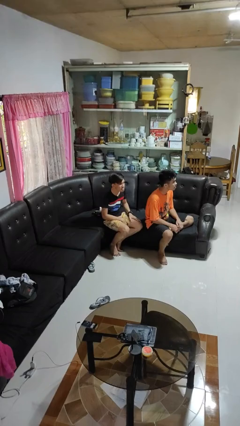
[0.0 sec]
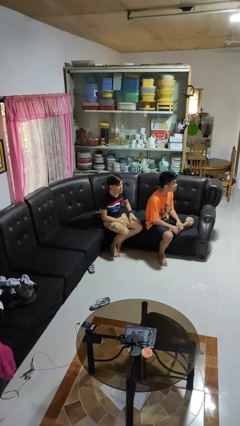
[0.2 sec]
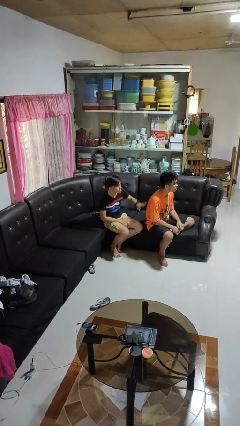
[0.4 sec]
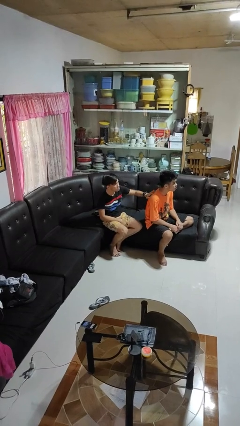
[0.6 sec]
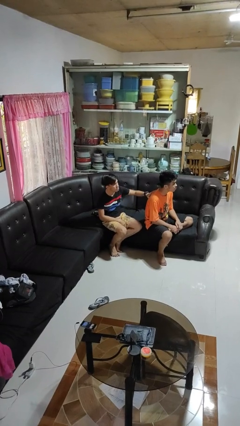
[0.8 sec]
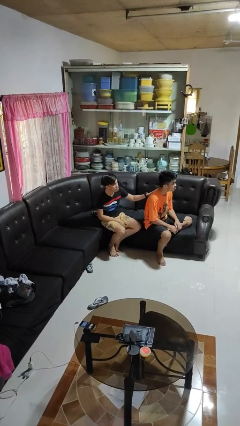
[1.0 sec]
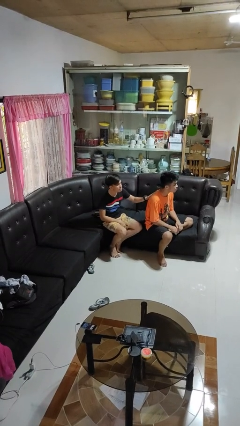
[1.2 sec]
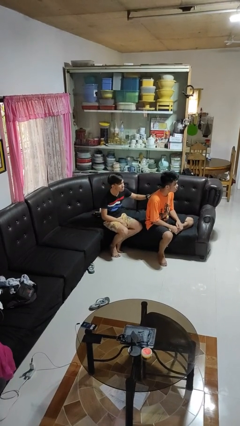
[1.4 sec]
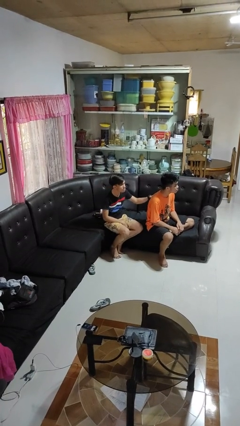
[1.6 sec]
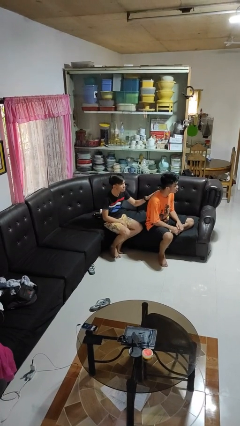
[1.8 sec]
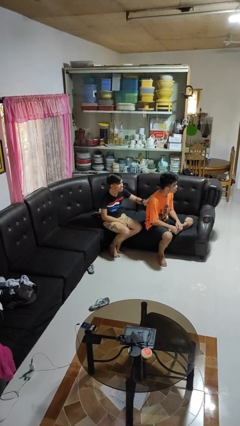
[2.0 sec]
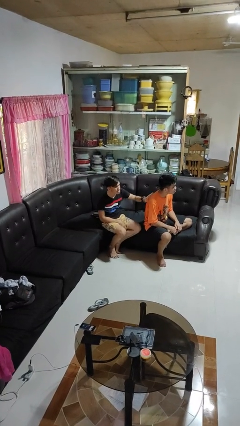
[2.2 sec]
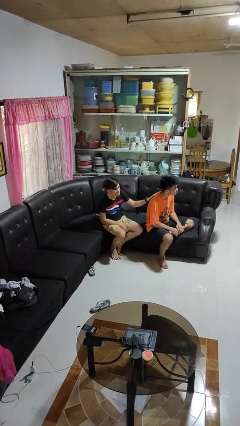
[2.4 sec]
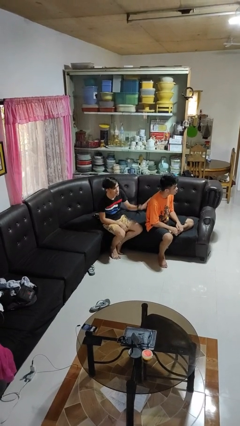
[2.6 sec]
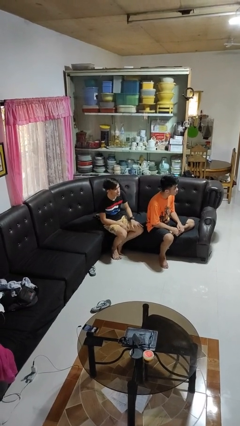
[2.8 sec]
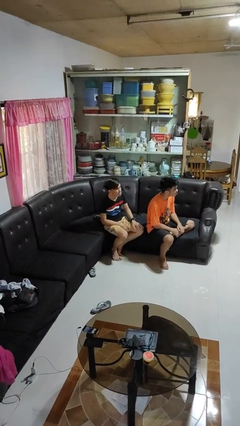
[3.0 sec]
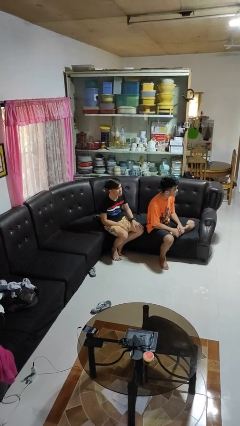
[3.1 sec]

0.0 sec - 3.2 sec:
person touches back of person

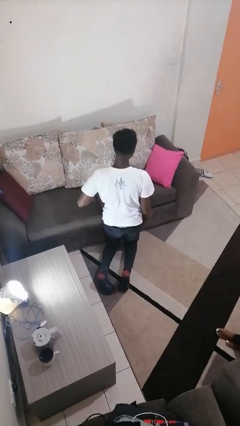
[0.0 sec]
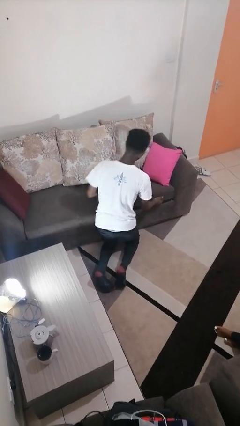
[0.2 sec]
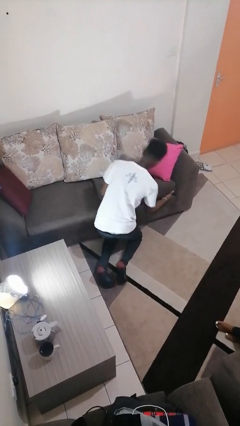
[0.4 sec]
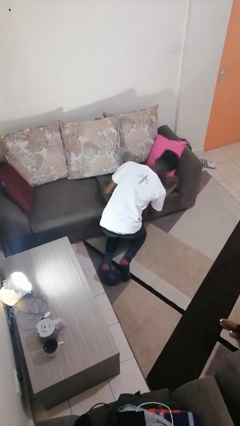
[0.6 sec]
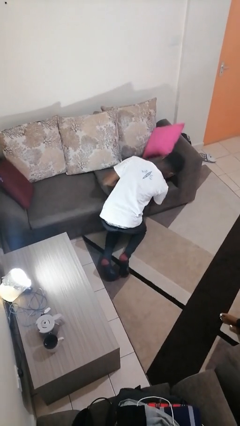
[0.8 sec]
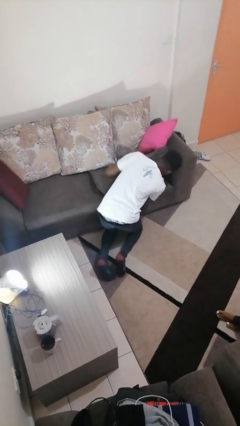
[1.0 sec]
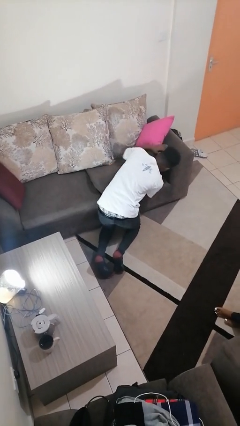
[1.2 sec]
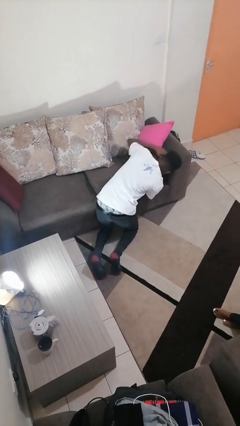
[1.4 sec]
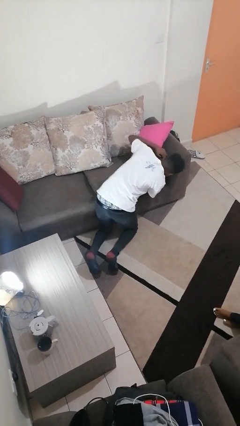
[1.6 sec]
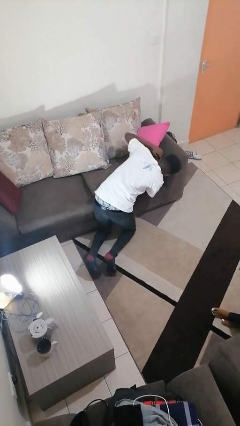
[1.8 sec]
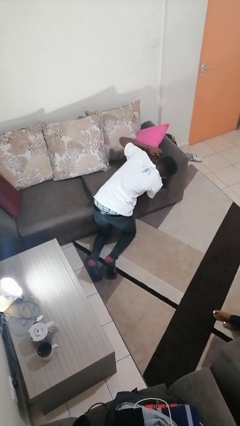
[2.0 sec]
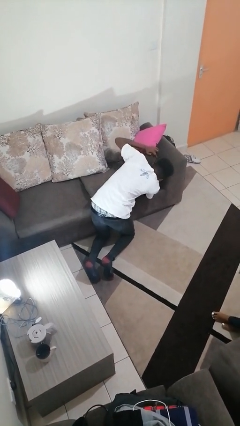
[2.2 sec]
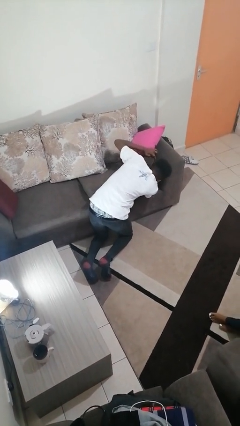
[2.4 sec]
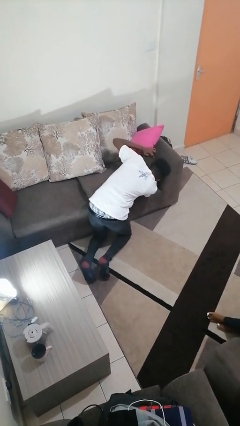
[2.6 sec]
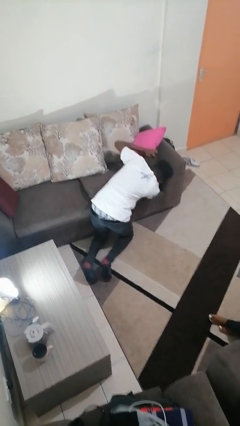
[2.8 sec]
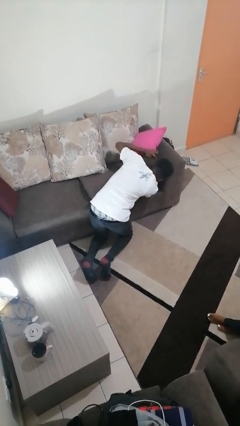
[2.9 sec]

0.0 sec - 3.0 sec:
person searches under couch

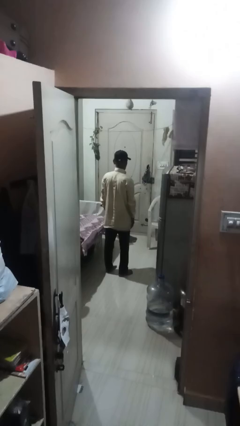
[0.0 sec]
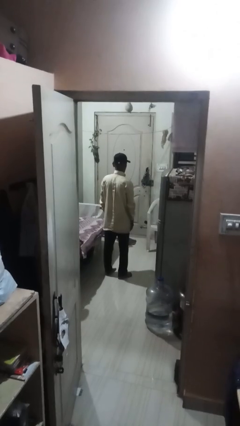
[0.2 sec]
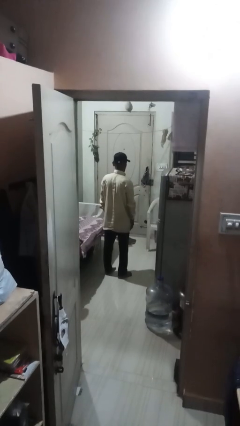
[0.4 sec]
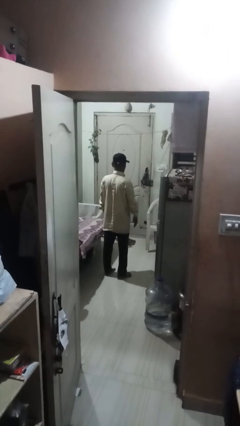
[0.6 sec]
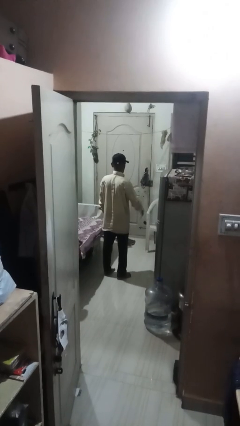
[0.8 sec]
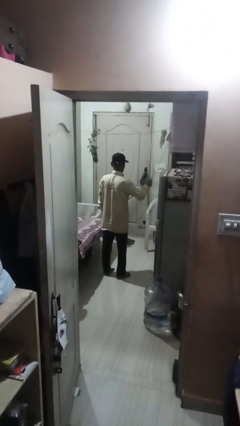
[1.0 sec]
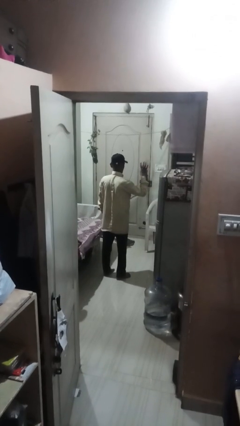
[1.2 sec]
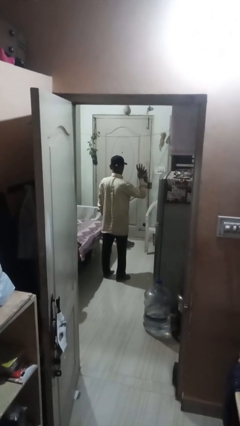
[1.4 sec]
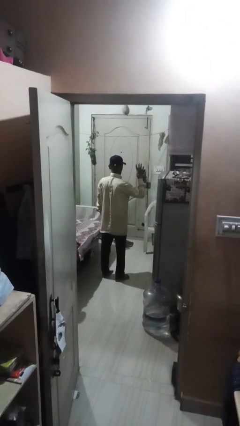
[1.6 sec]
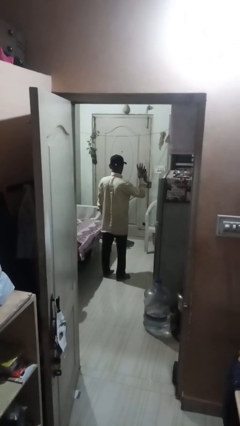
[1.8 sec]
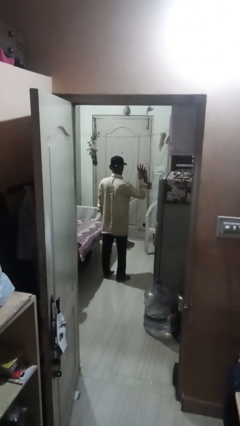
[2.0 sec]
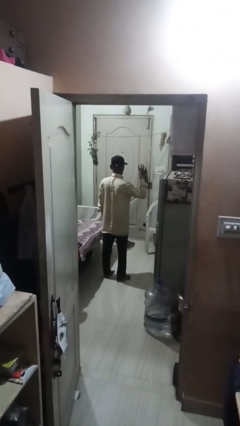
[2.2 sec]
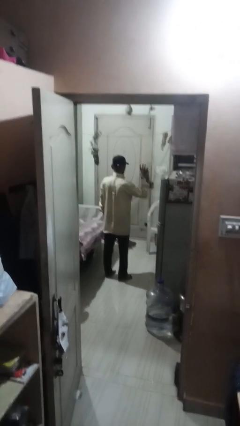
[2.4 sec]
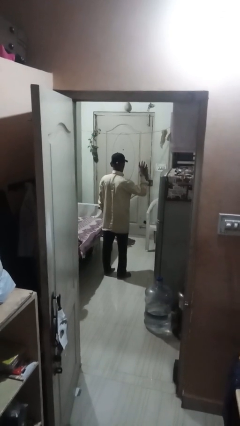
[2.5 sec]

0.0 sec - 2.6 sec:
person gestures number four

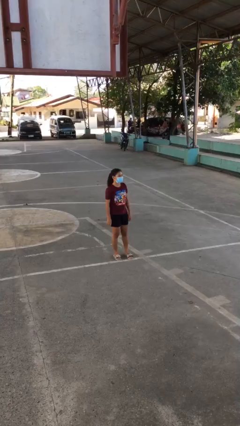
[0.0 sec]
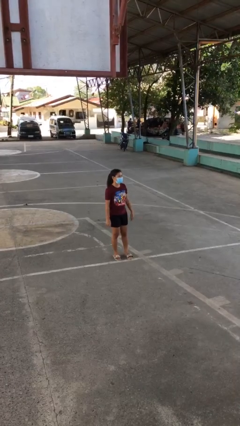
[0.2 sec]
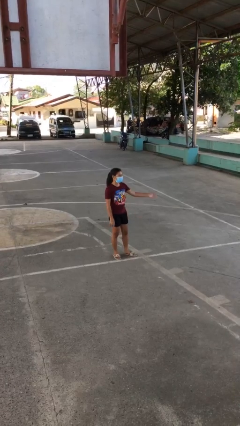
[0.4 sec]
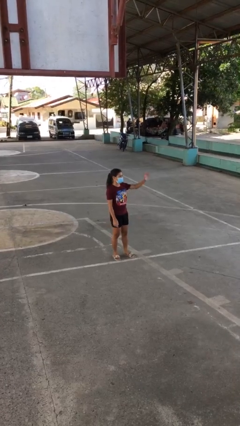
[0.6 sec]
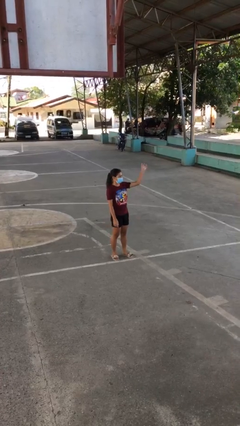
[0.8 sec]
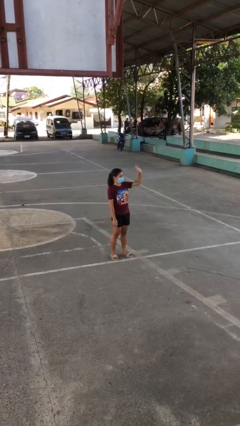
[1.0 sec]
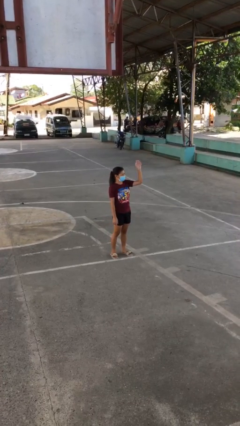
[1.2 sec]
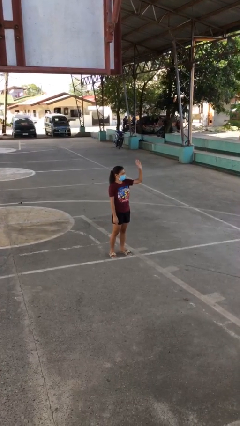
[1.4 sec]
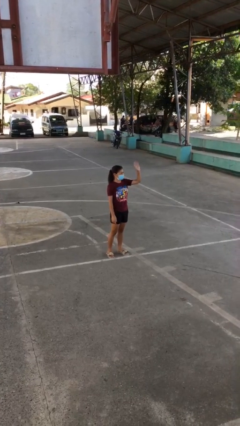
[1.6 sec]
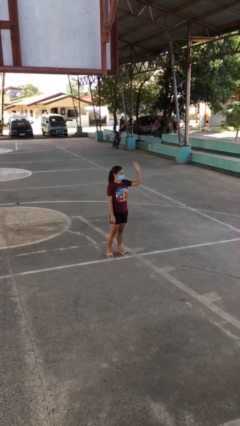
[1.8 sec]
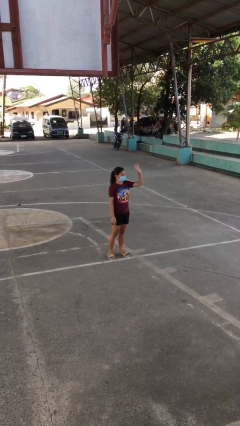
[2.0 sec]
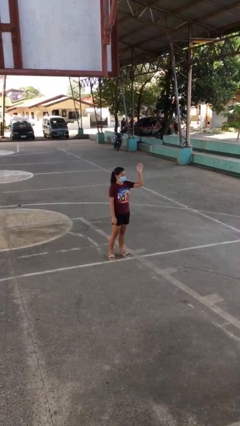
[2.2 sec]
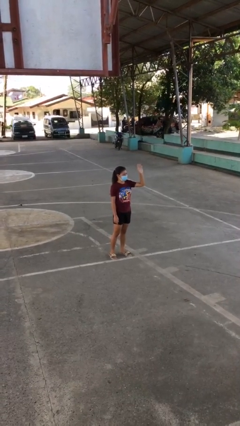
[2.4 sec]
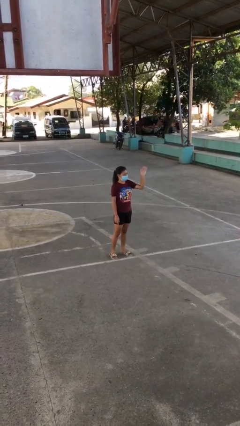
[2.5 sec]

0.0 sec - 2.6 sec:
person waves at person

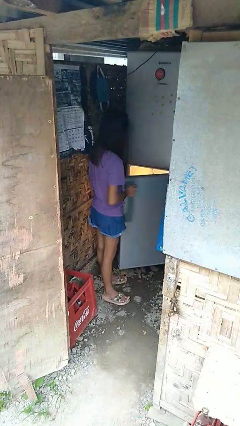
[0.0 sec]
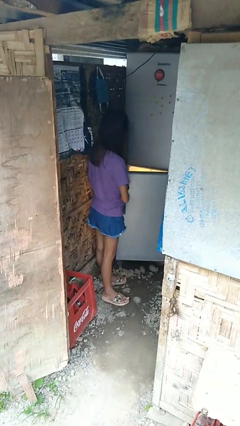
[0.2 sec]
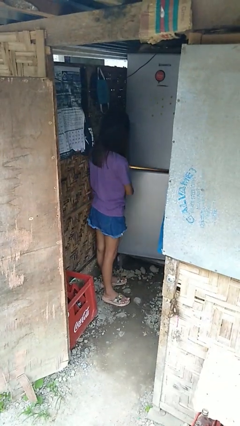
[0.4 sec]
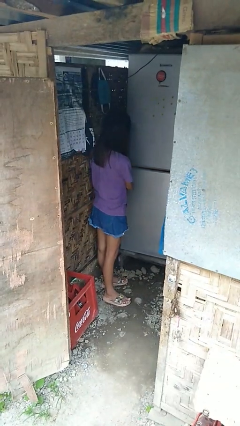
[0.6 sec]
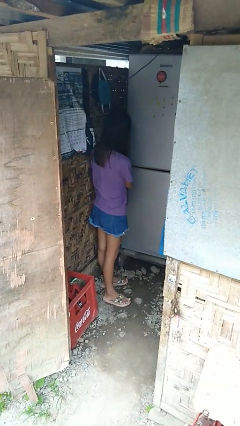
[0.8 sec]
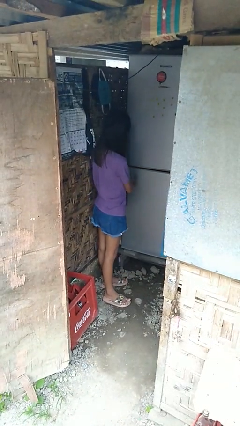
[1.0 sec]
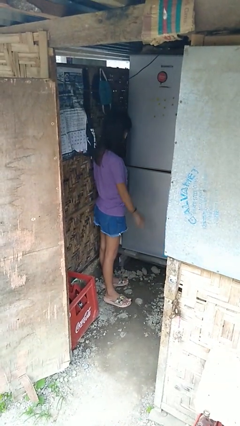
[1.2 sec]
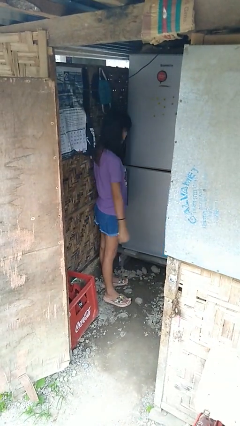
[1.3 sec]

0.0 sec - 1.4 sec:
person closes refrigerator

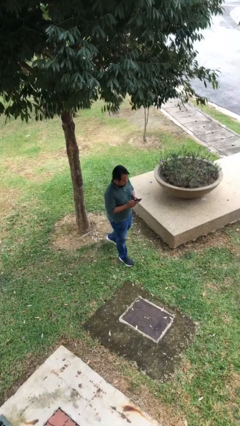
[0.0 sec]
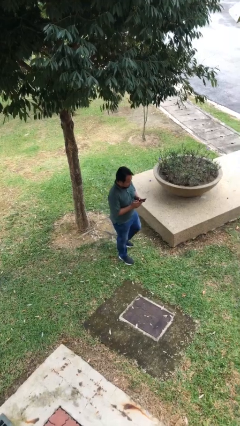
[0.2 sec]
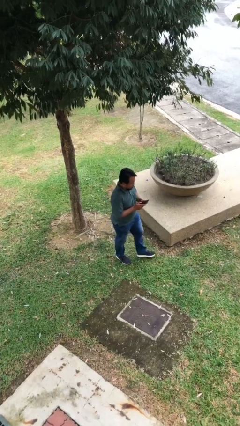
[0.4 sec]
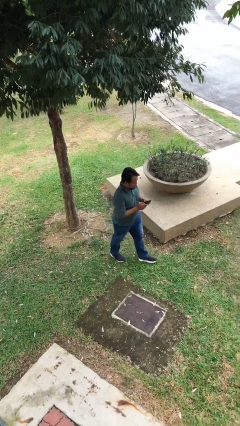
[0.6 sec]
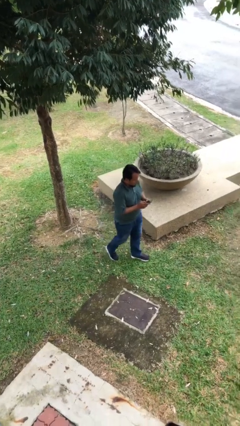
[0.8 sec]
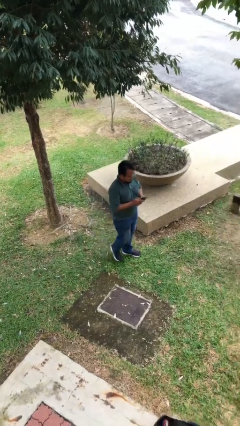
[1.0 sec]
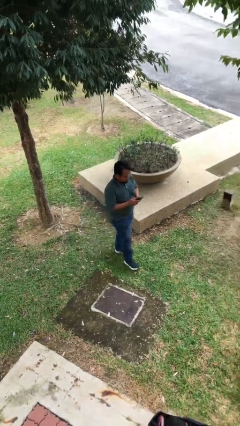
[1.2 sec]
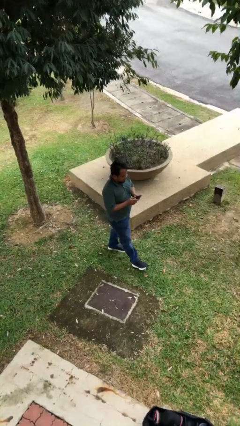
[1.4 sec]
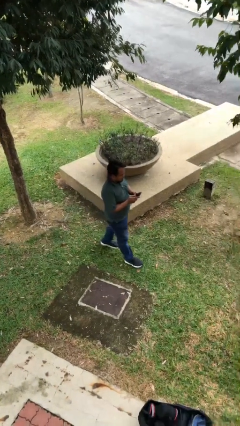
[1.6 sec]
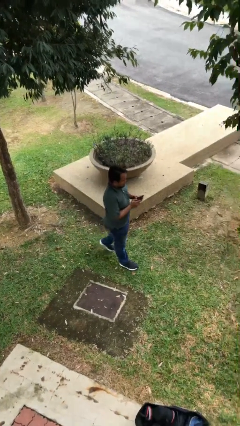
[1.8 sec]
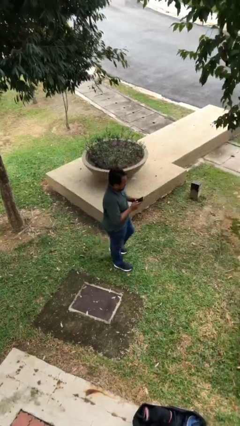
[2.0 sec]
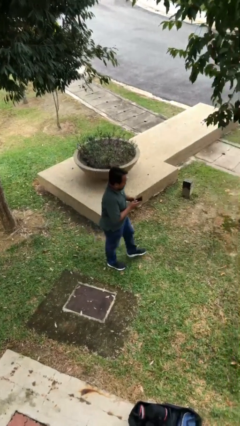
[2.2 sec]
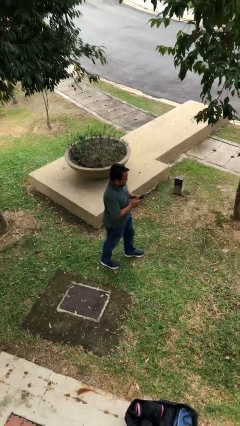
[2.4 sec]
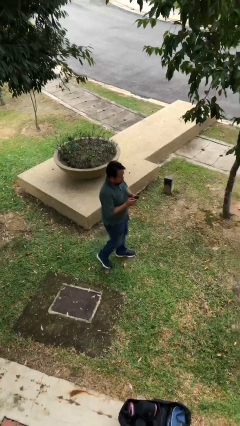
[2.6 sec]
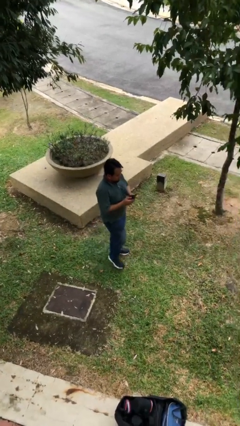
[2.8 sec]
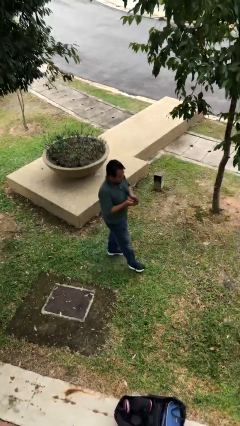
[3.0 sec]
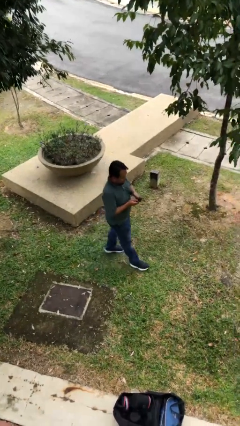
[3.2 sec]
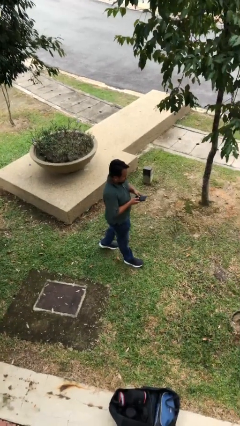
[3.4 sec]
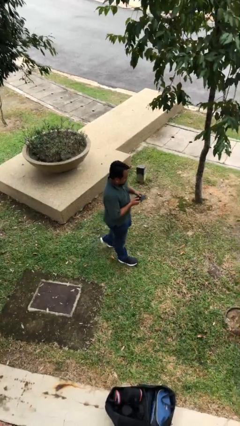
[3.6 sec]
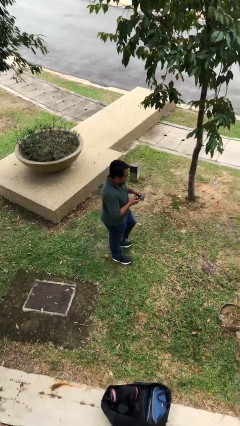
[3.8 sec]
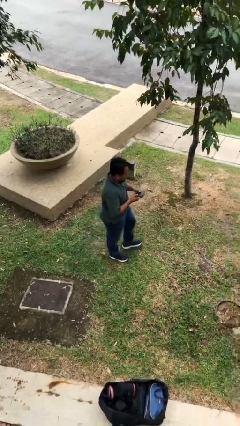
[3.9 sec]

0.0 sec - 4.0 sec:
person texts on phone
